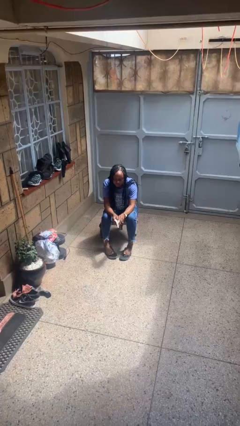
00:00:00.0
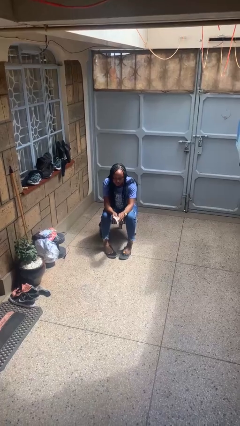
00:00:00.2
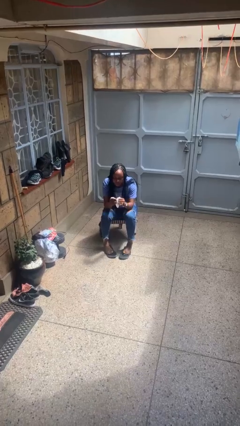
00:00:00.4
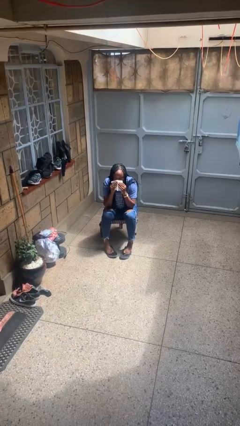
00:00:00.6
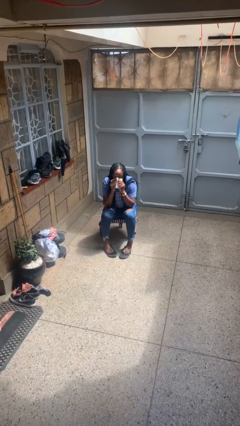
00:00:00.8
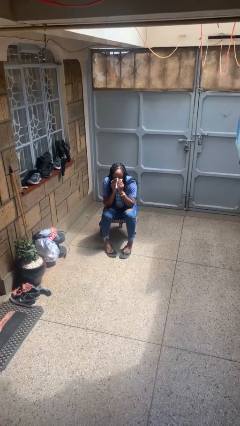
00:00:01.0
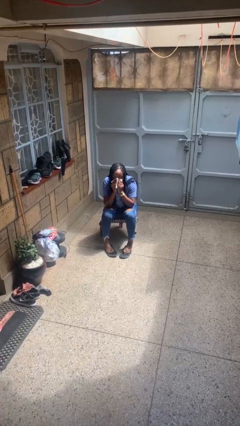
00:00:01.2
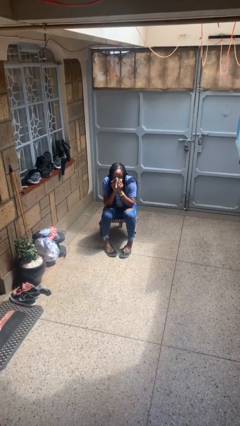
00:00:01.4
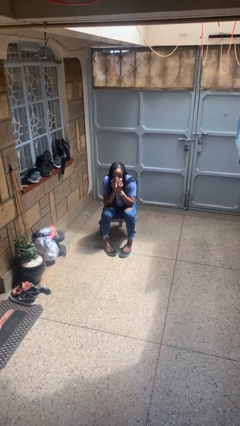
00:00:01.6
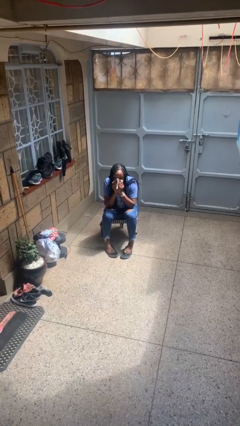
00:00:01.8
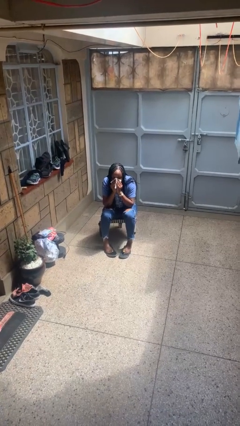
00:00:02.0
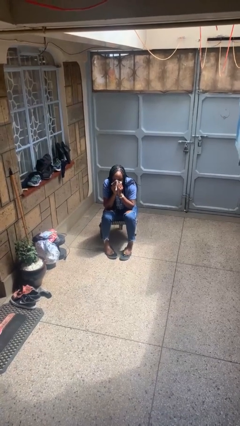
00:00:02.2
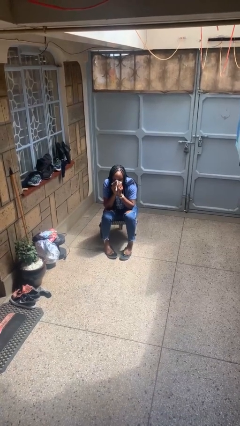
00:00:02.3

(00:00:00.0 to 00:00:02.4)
person blows nose

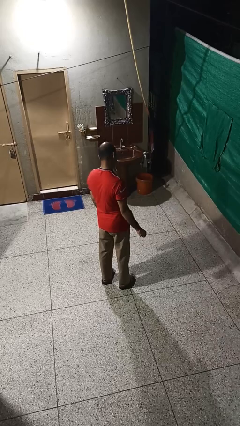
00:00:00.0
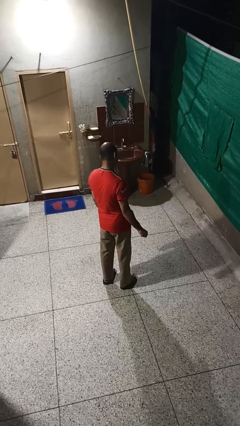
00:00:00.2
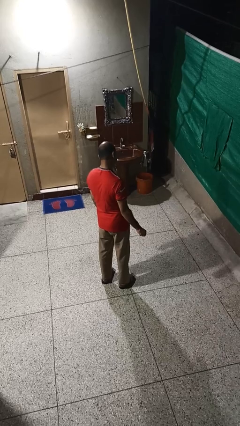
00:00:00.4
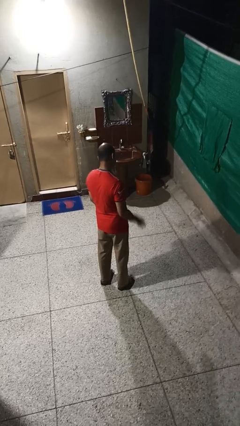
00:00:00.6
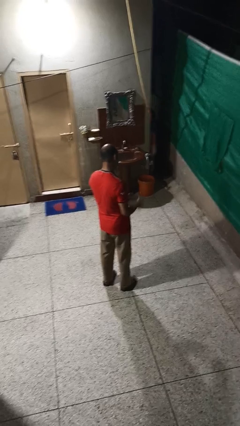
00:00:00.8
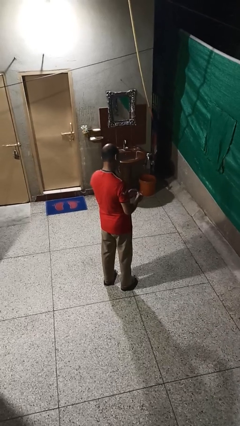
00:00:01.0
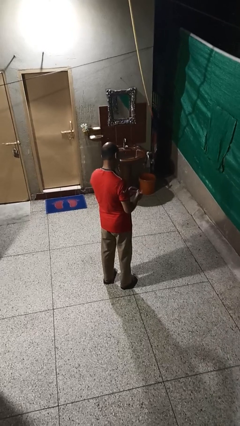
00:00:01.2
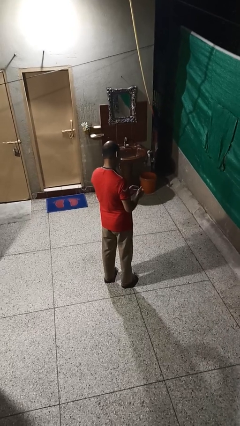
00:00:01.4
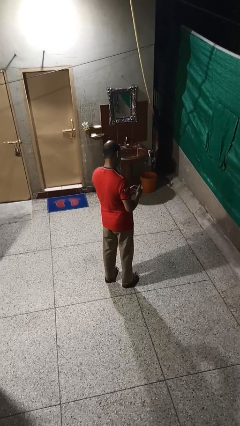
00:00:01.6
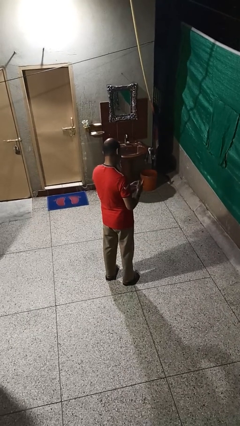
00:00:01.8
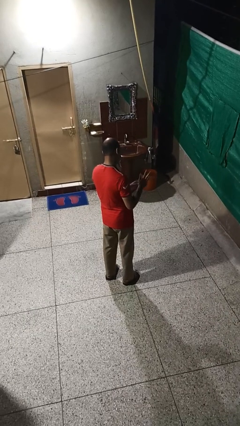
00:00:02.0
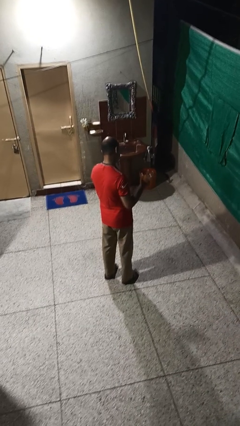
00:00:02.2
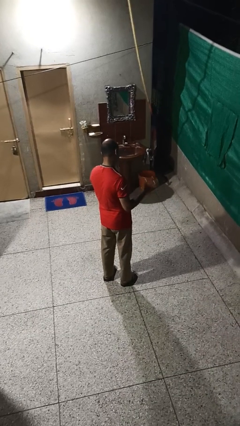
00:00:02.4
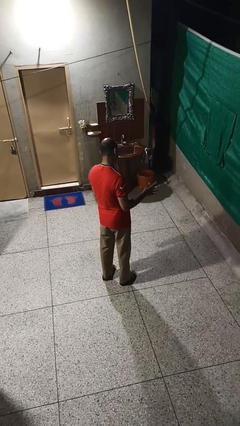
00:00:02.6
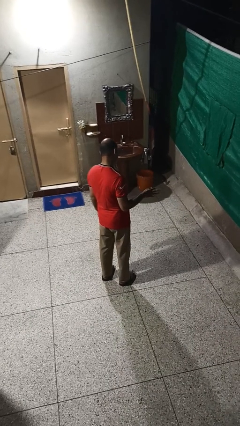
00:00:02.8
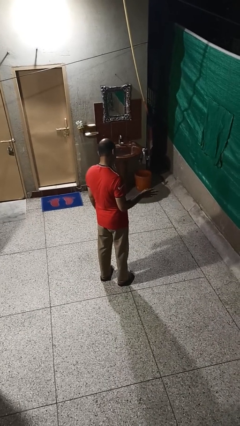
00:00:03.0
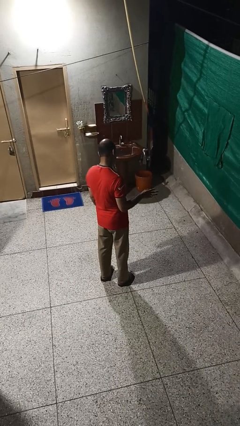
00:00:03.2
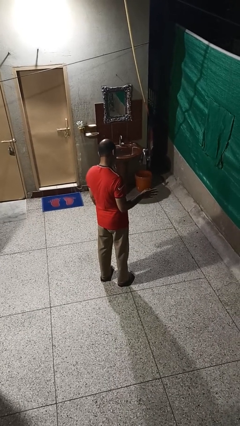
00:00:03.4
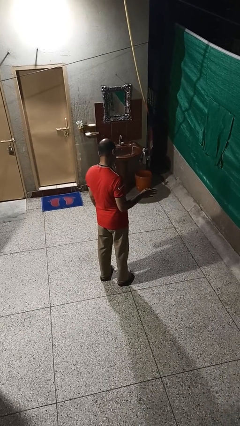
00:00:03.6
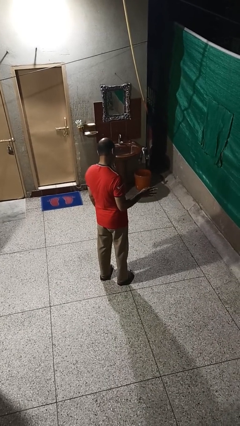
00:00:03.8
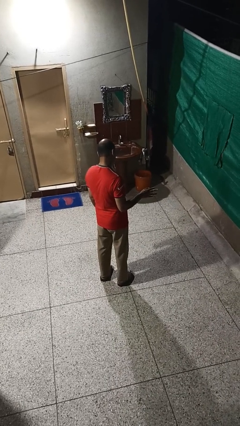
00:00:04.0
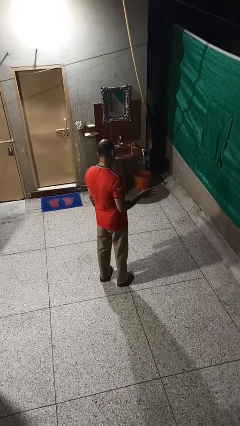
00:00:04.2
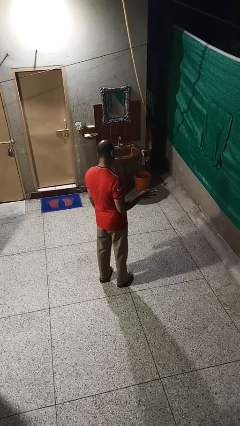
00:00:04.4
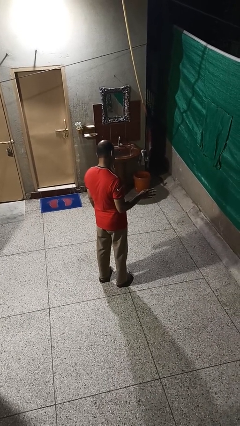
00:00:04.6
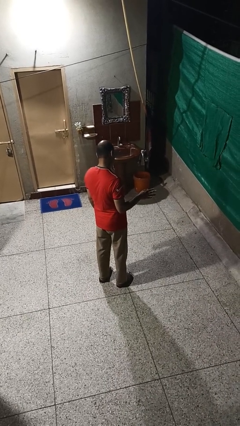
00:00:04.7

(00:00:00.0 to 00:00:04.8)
person puts on ring

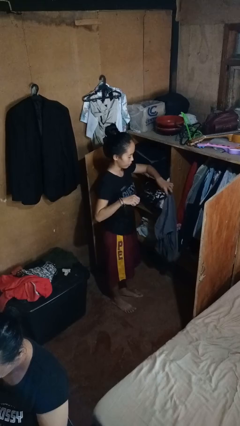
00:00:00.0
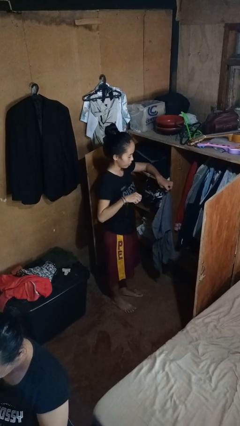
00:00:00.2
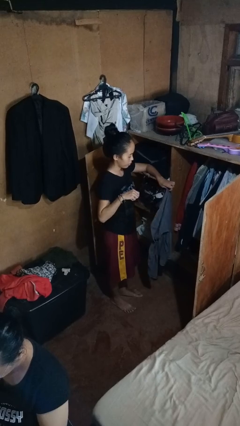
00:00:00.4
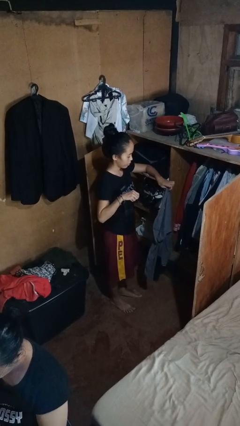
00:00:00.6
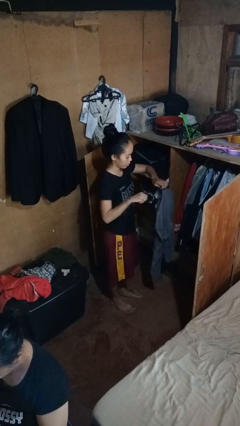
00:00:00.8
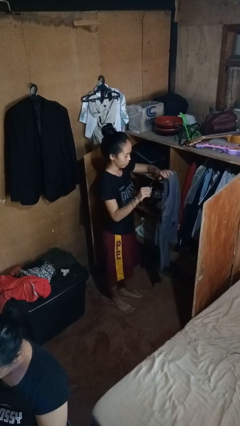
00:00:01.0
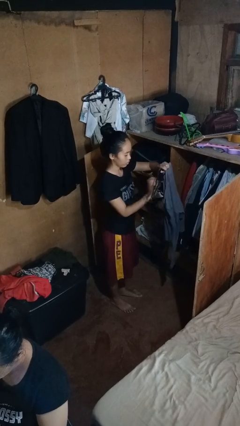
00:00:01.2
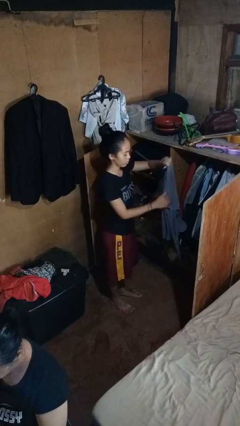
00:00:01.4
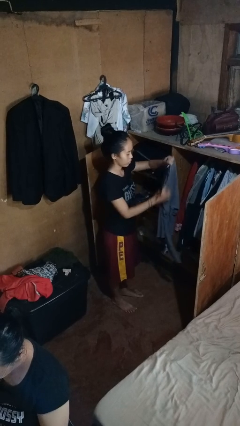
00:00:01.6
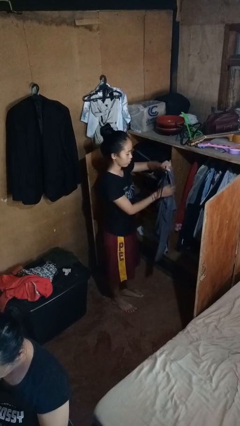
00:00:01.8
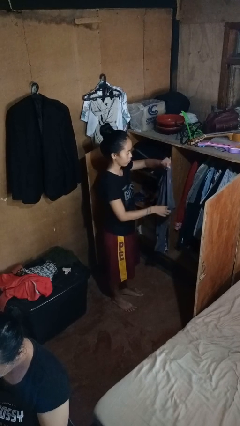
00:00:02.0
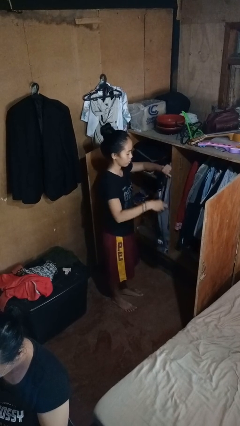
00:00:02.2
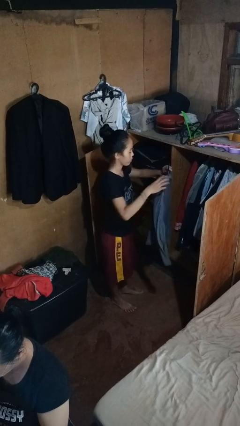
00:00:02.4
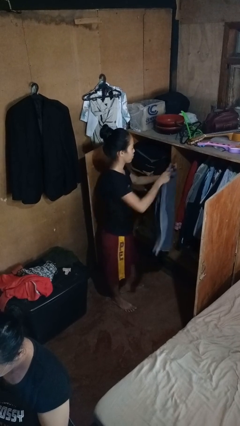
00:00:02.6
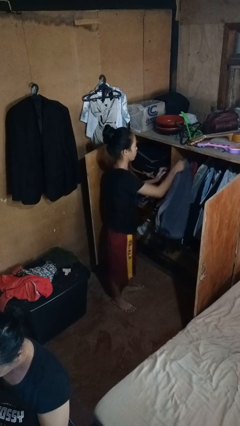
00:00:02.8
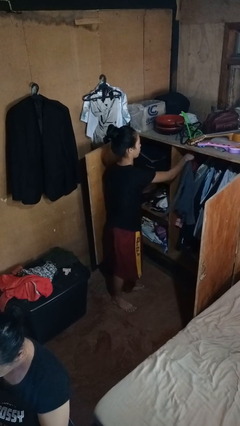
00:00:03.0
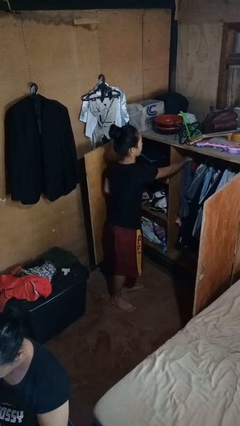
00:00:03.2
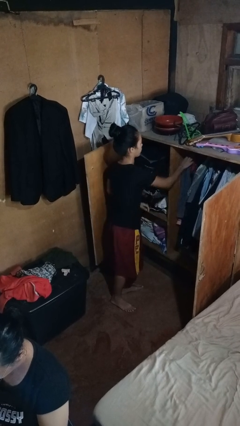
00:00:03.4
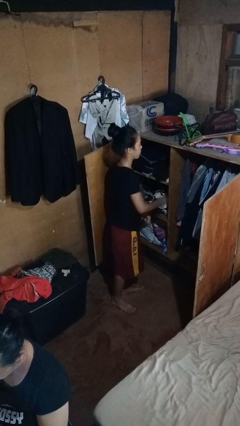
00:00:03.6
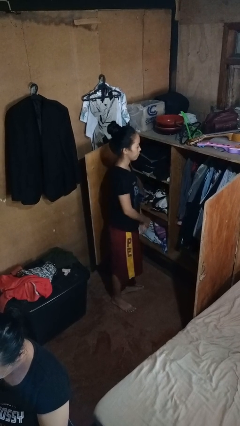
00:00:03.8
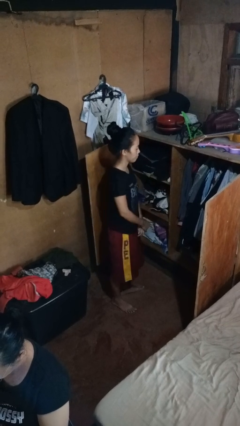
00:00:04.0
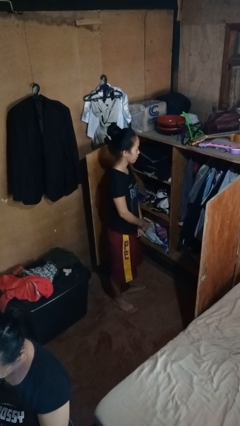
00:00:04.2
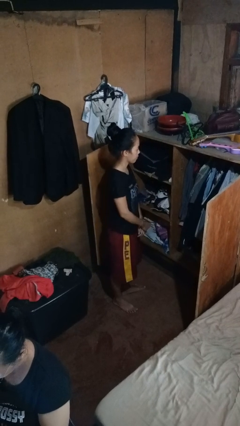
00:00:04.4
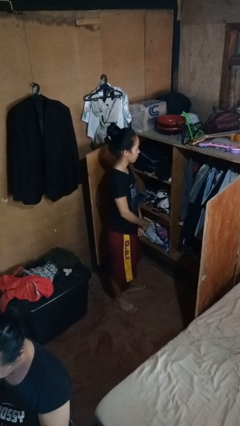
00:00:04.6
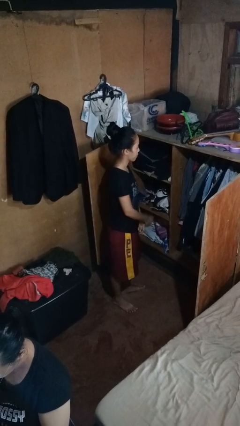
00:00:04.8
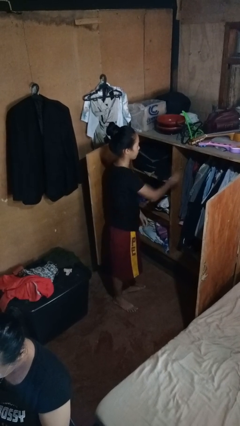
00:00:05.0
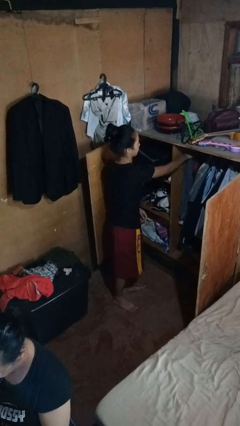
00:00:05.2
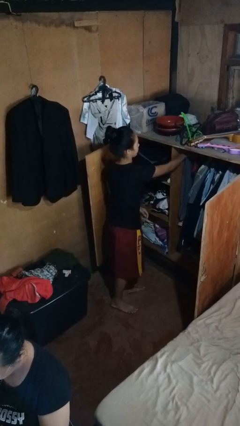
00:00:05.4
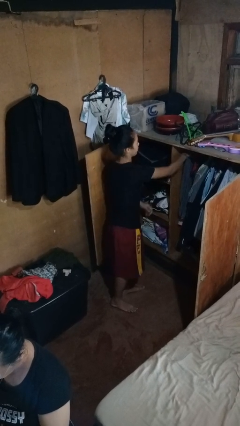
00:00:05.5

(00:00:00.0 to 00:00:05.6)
person puts clothes into closet

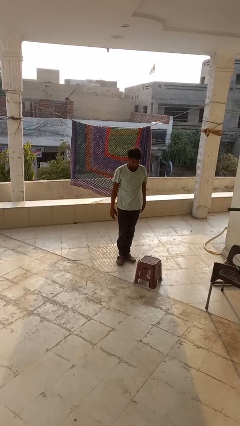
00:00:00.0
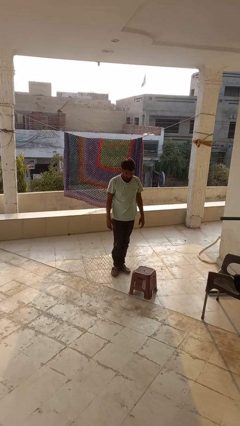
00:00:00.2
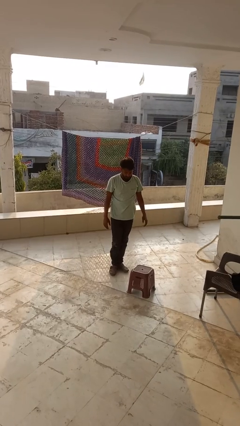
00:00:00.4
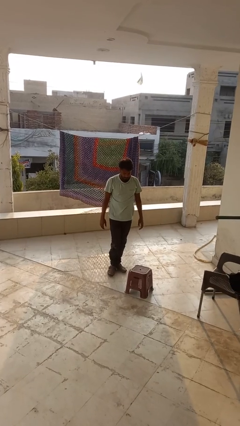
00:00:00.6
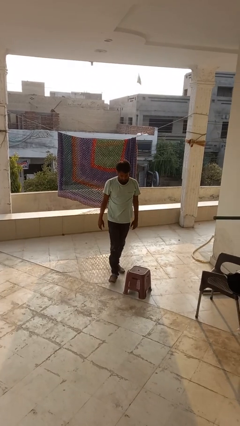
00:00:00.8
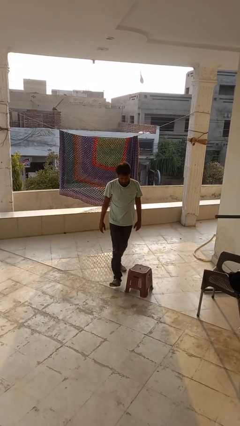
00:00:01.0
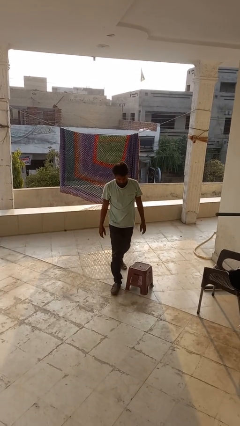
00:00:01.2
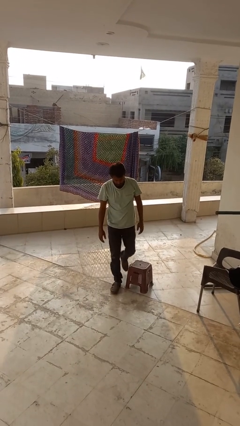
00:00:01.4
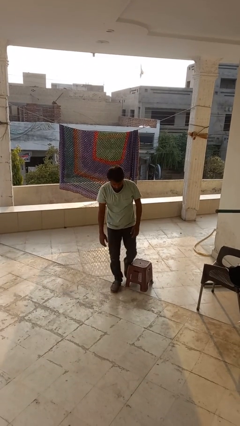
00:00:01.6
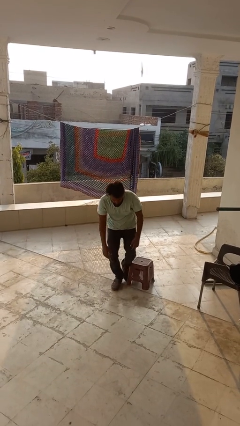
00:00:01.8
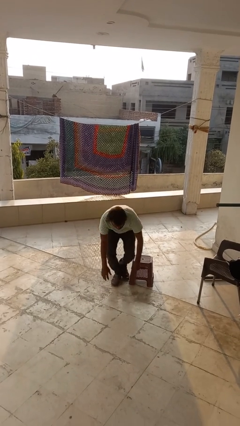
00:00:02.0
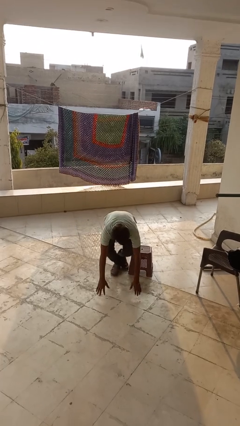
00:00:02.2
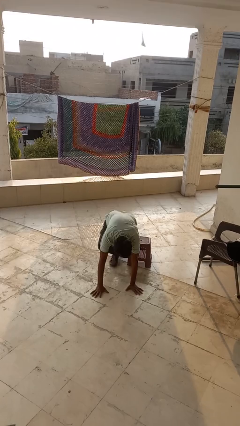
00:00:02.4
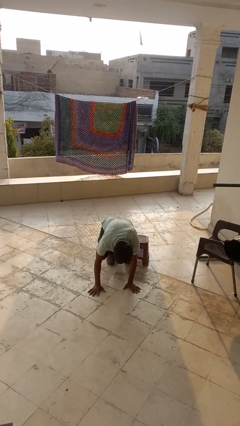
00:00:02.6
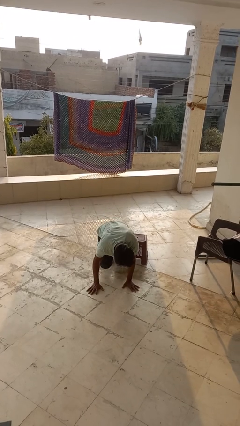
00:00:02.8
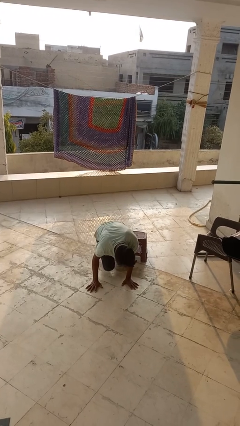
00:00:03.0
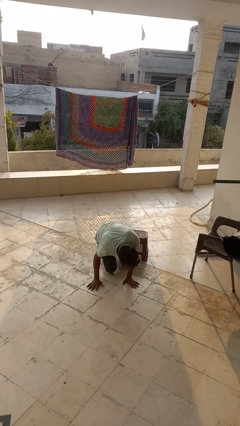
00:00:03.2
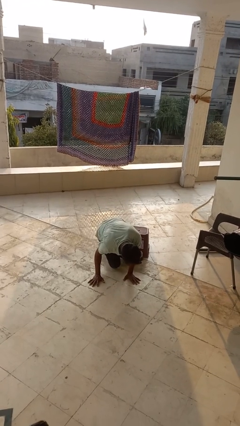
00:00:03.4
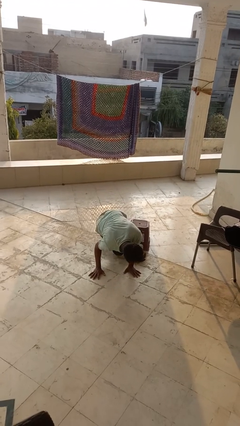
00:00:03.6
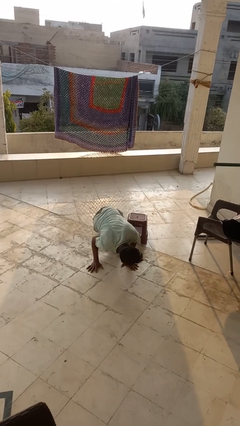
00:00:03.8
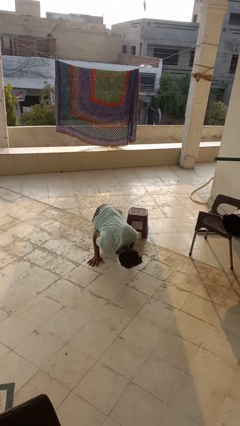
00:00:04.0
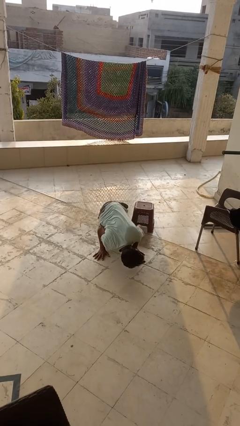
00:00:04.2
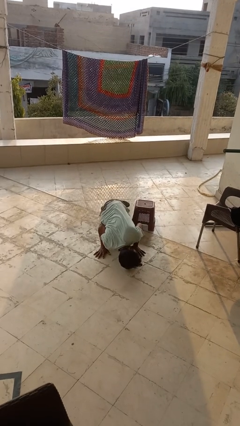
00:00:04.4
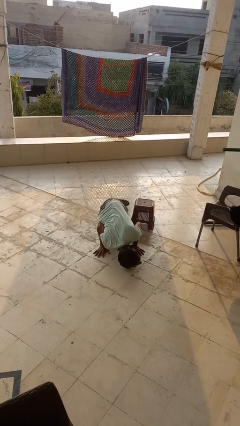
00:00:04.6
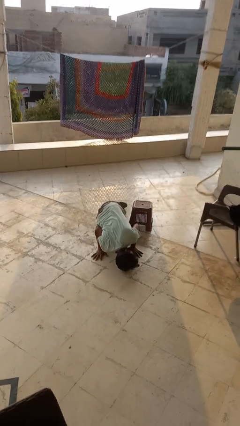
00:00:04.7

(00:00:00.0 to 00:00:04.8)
person trips on object on floor

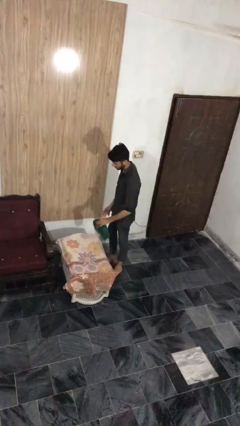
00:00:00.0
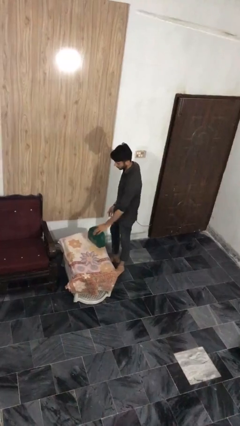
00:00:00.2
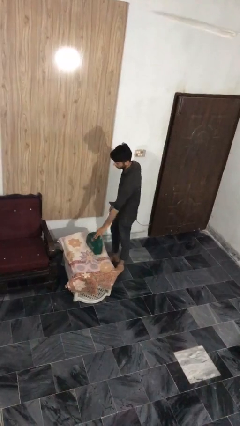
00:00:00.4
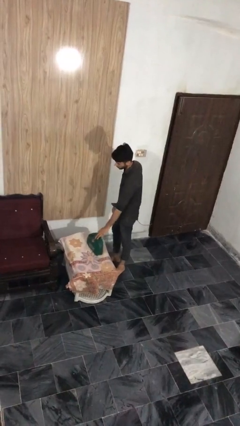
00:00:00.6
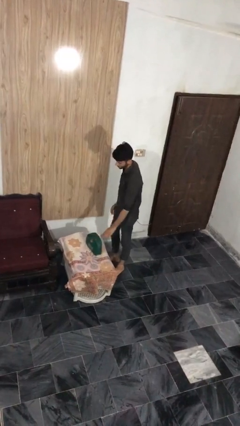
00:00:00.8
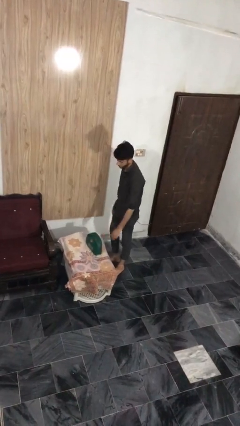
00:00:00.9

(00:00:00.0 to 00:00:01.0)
person puts down object on table
